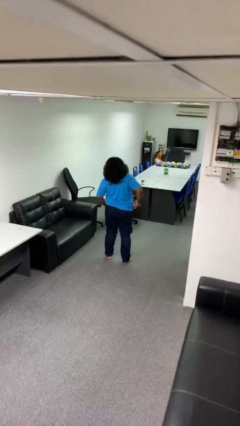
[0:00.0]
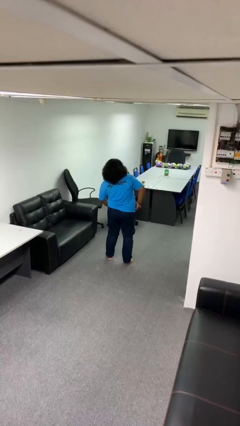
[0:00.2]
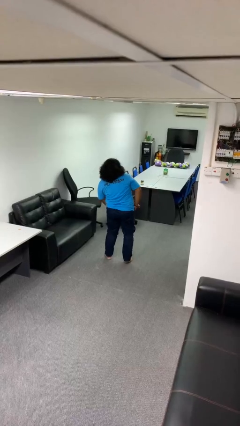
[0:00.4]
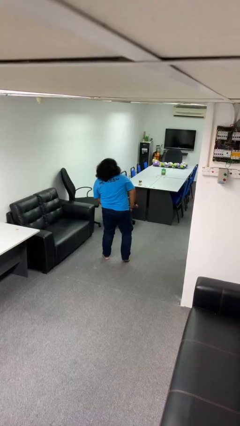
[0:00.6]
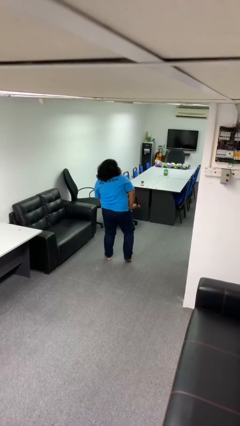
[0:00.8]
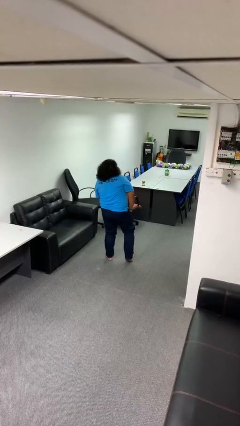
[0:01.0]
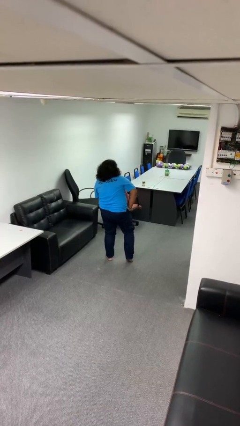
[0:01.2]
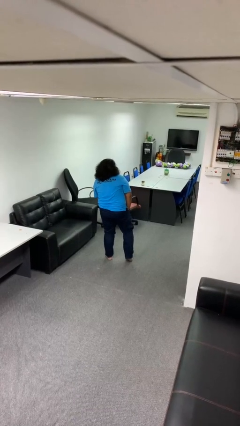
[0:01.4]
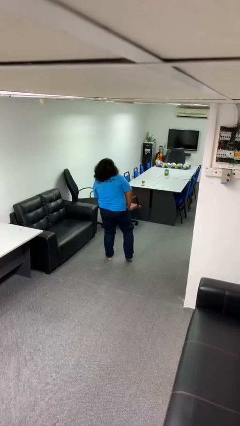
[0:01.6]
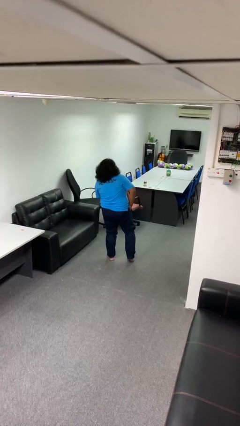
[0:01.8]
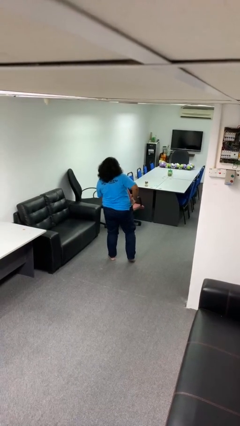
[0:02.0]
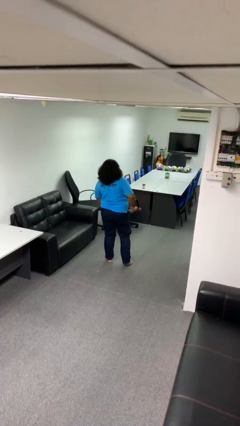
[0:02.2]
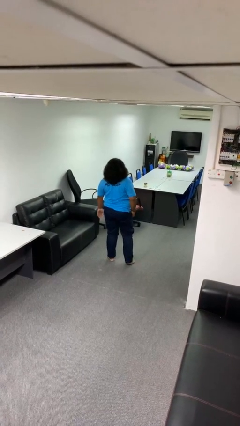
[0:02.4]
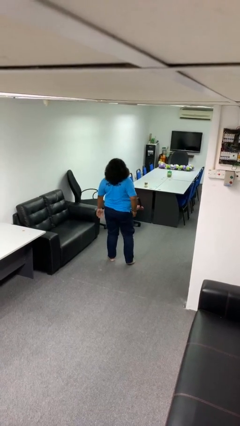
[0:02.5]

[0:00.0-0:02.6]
person puts hands in back pockets

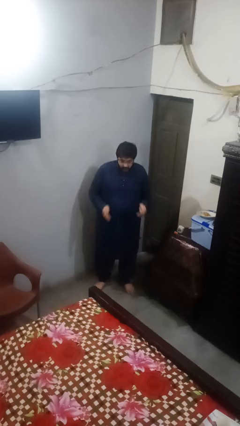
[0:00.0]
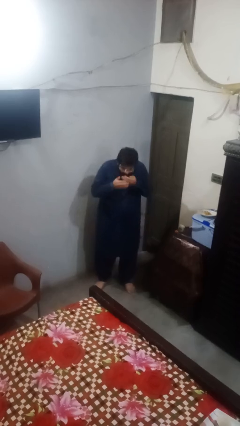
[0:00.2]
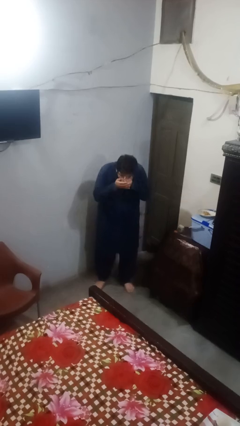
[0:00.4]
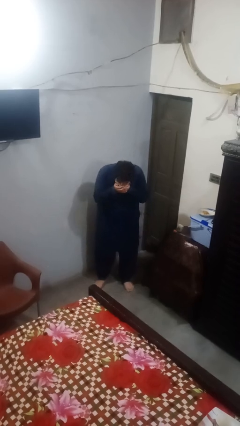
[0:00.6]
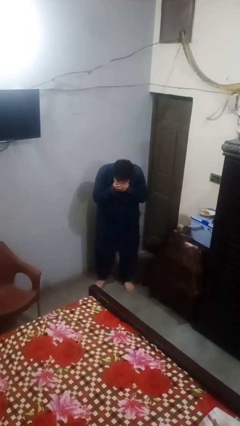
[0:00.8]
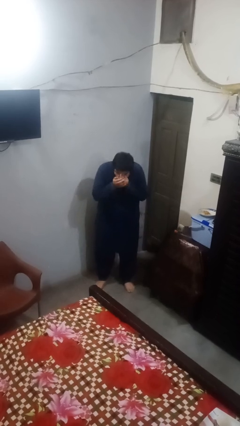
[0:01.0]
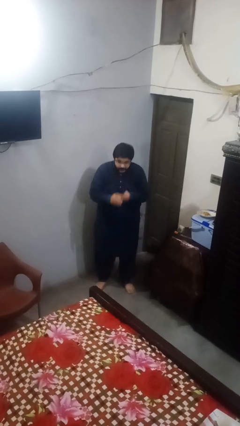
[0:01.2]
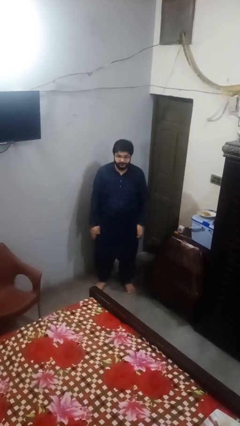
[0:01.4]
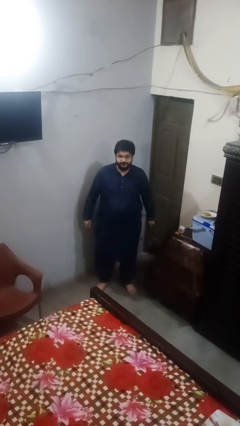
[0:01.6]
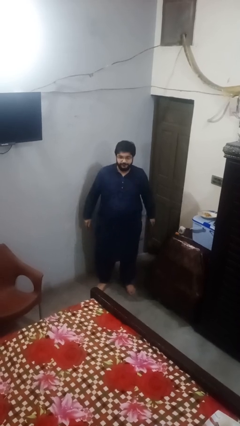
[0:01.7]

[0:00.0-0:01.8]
person sneezes into hand

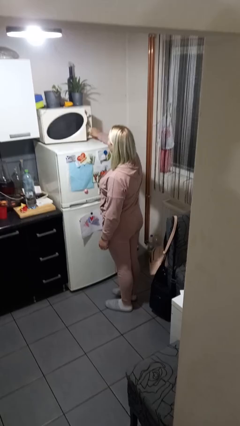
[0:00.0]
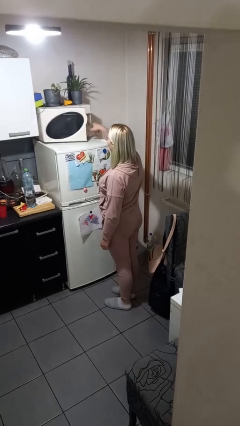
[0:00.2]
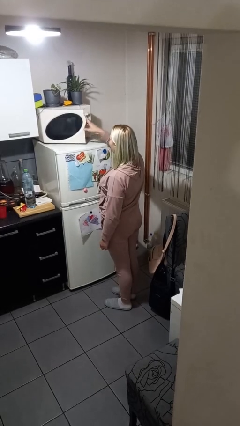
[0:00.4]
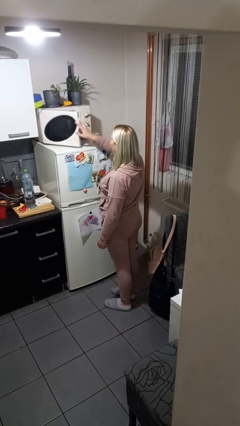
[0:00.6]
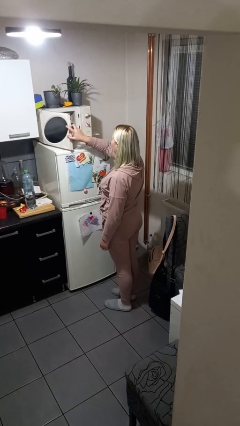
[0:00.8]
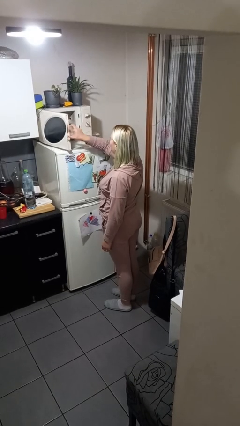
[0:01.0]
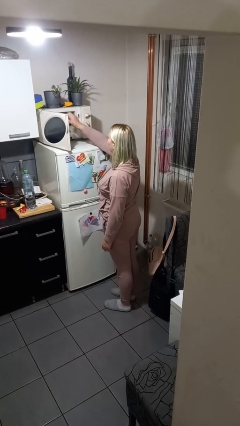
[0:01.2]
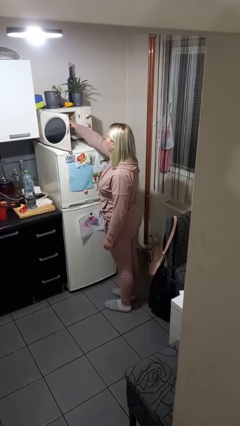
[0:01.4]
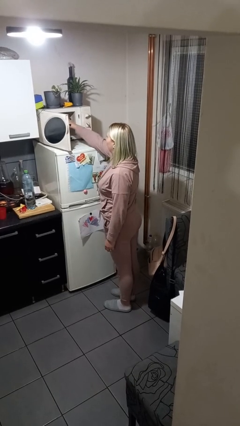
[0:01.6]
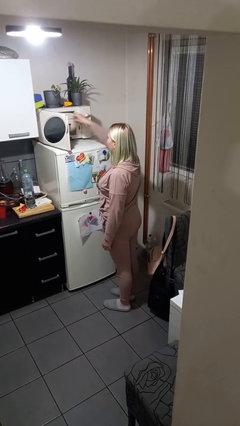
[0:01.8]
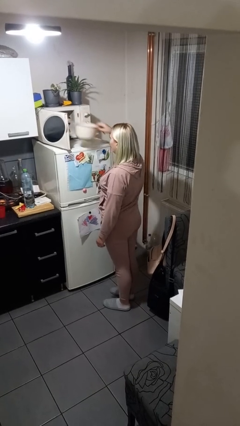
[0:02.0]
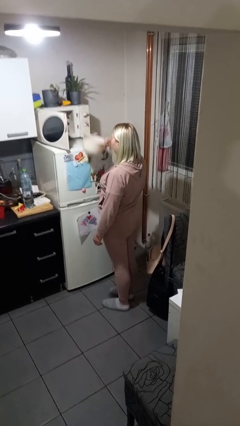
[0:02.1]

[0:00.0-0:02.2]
person takes object from microwave

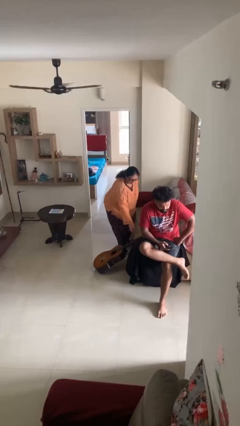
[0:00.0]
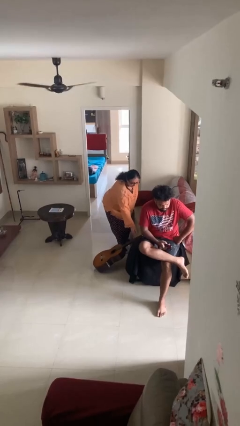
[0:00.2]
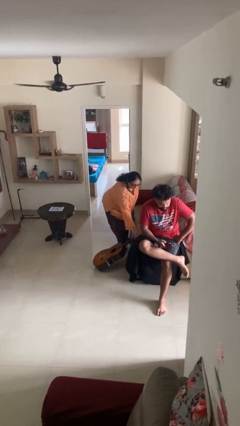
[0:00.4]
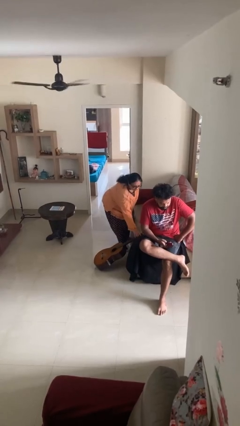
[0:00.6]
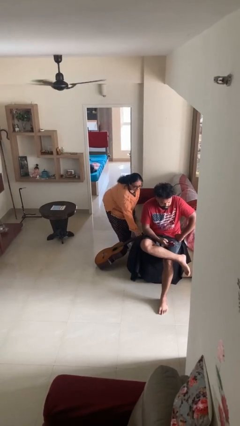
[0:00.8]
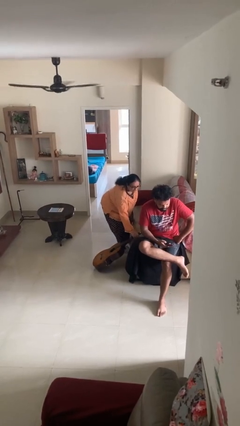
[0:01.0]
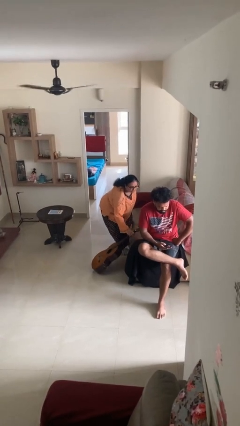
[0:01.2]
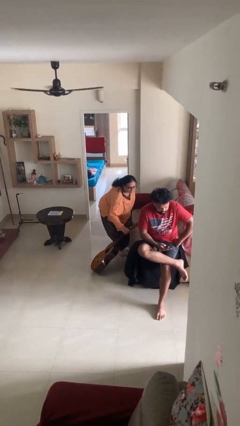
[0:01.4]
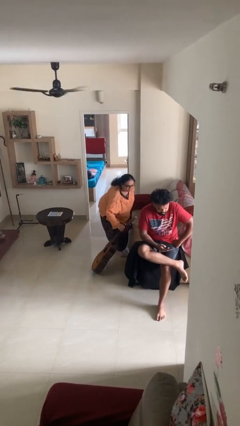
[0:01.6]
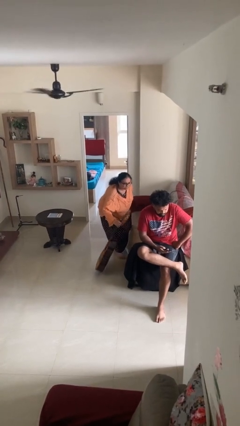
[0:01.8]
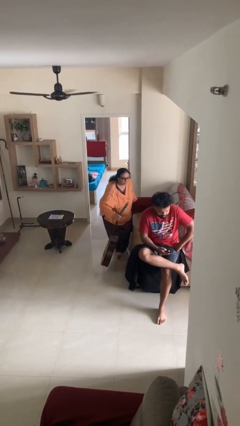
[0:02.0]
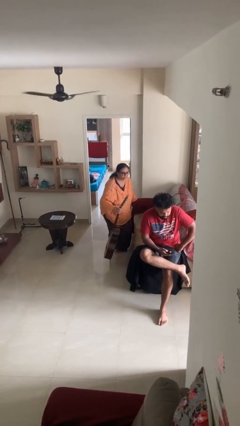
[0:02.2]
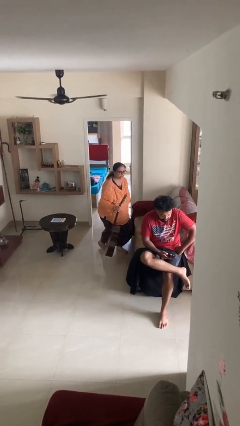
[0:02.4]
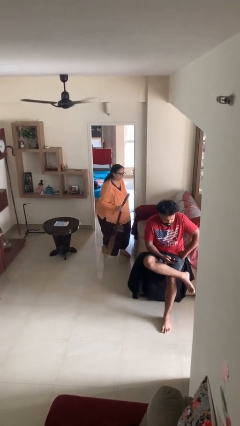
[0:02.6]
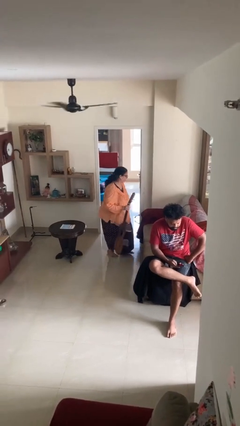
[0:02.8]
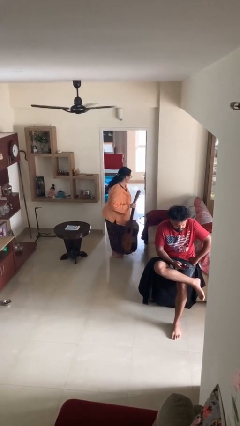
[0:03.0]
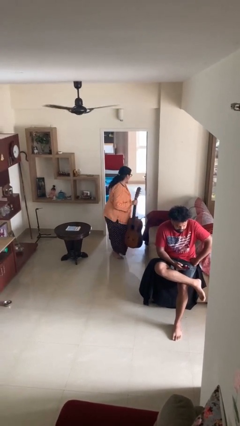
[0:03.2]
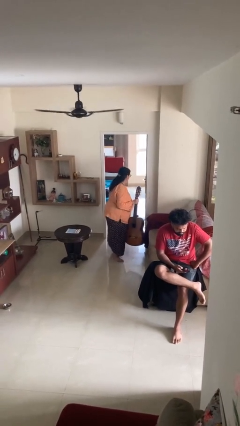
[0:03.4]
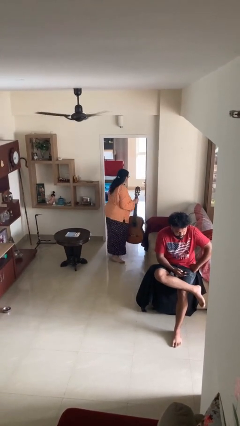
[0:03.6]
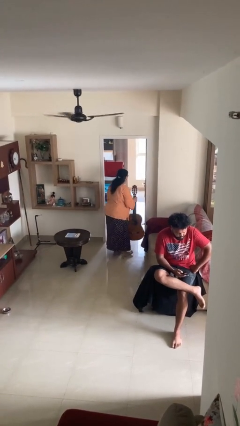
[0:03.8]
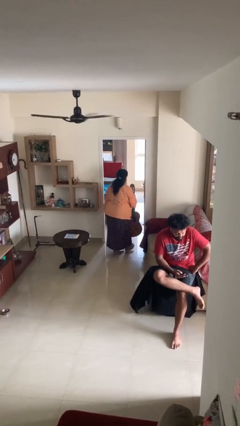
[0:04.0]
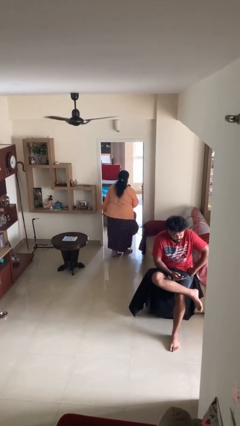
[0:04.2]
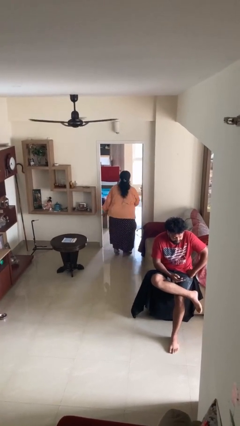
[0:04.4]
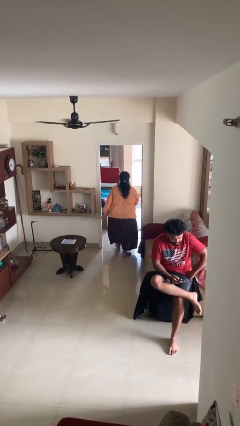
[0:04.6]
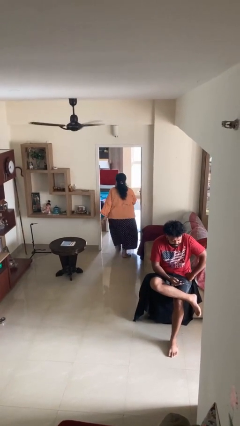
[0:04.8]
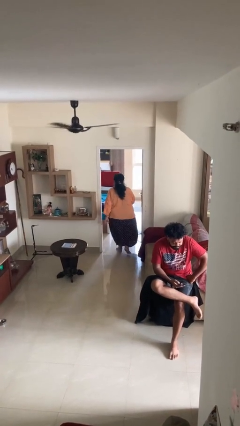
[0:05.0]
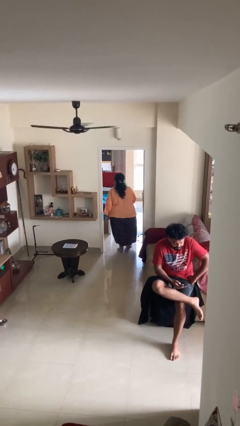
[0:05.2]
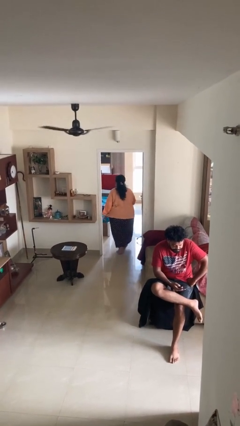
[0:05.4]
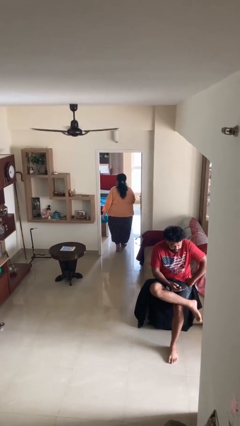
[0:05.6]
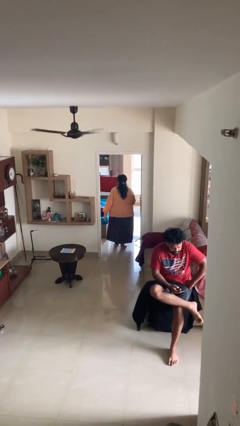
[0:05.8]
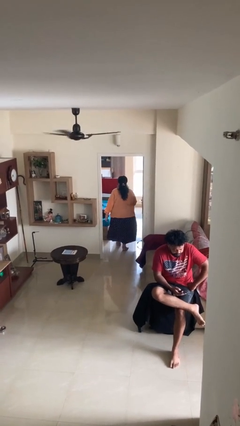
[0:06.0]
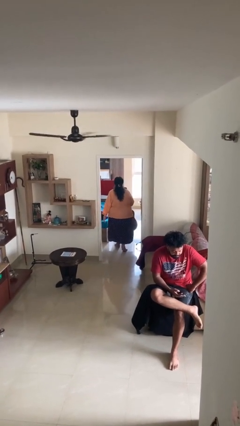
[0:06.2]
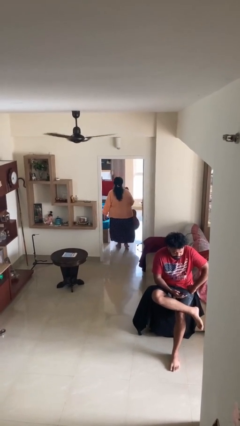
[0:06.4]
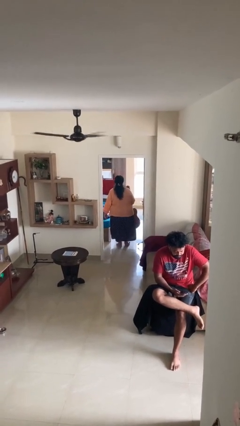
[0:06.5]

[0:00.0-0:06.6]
person steals object from person

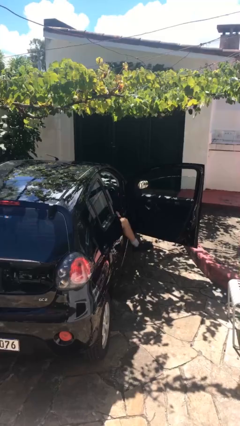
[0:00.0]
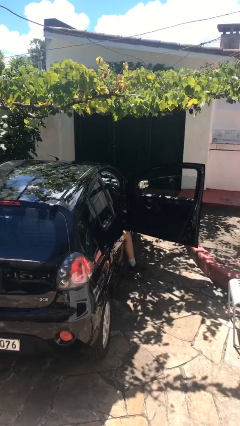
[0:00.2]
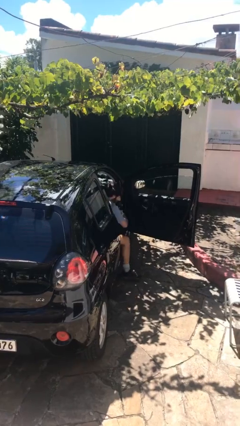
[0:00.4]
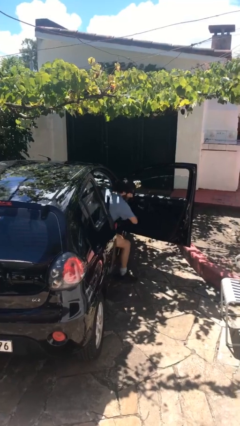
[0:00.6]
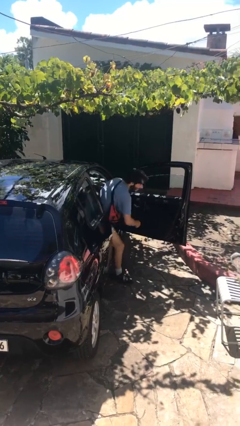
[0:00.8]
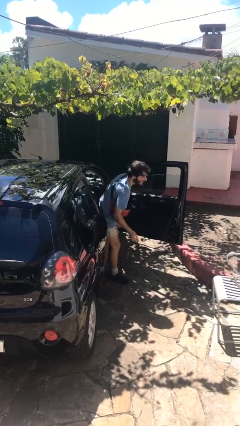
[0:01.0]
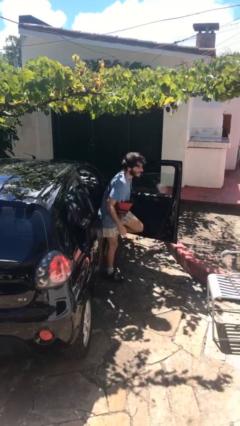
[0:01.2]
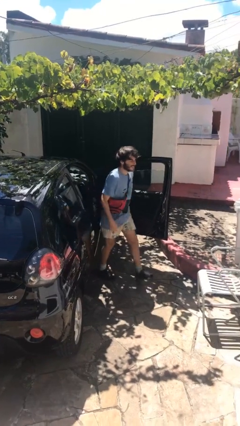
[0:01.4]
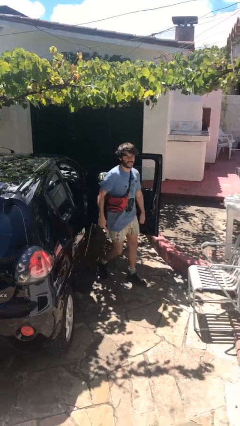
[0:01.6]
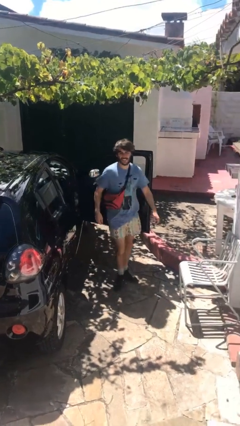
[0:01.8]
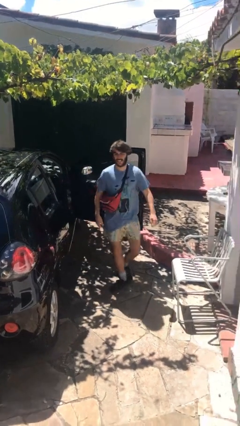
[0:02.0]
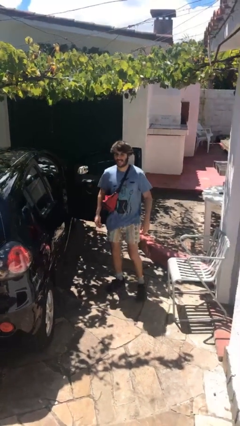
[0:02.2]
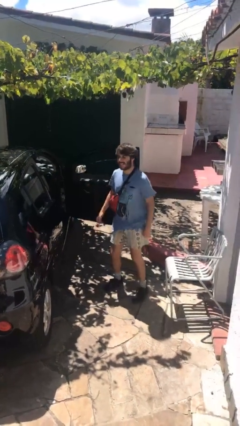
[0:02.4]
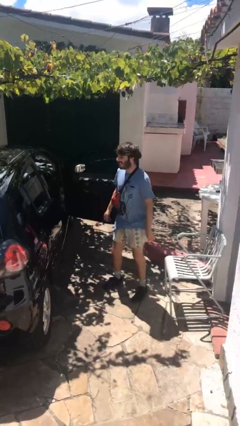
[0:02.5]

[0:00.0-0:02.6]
person exits car

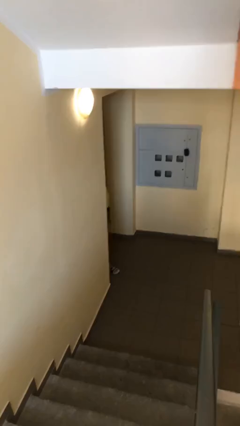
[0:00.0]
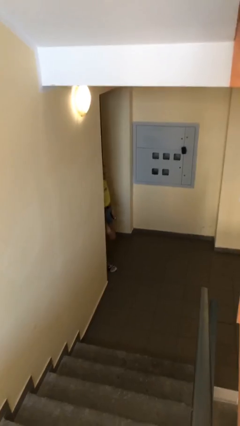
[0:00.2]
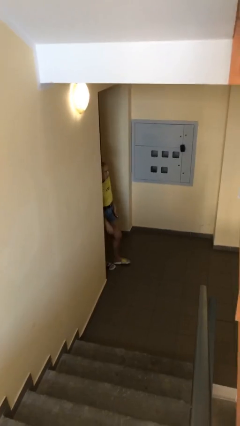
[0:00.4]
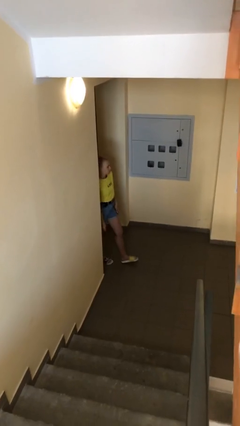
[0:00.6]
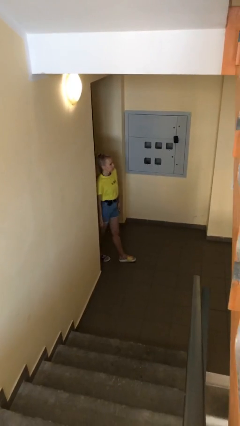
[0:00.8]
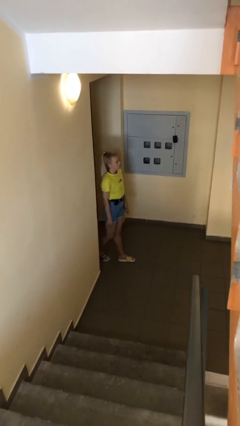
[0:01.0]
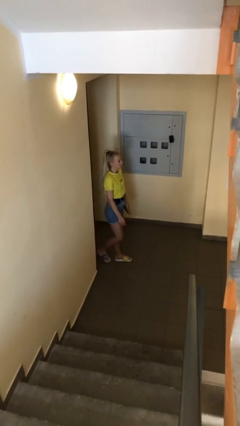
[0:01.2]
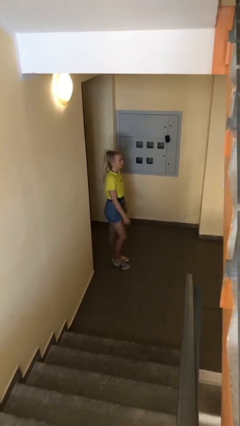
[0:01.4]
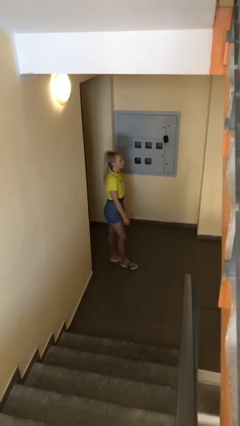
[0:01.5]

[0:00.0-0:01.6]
person enters scene through structure
